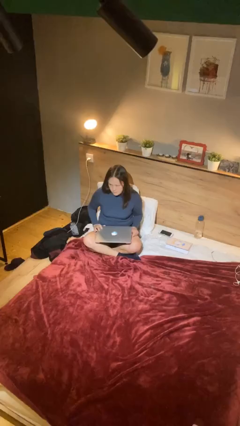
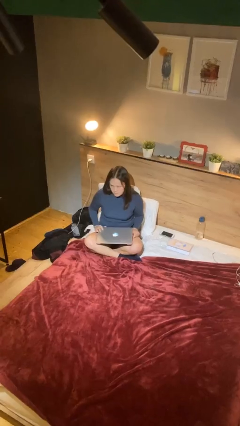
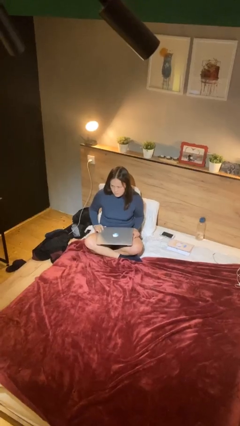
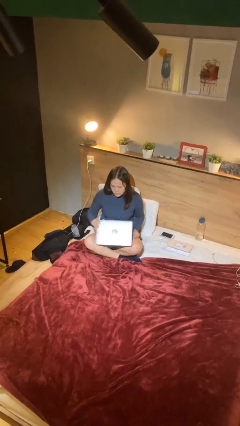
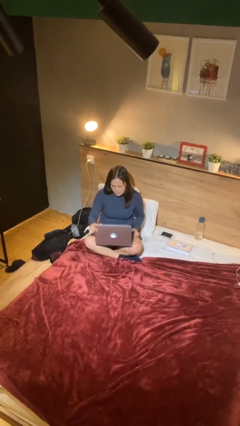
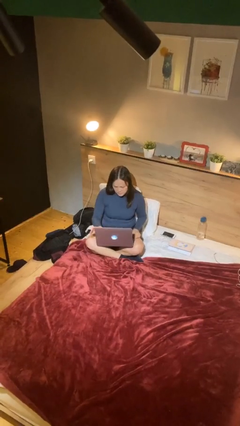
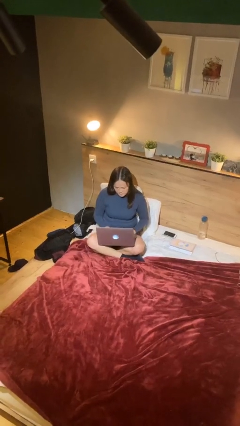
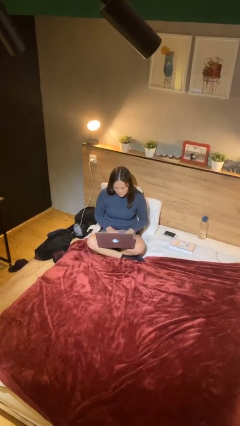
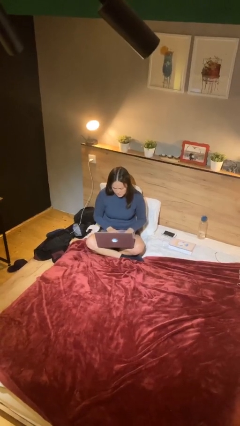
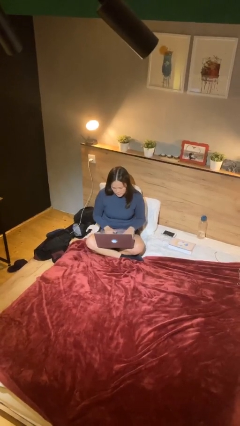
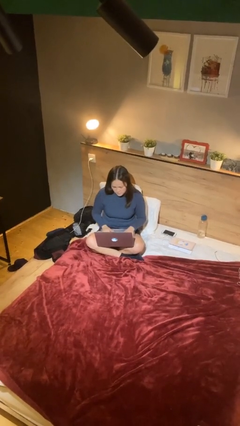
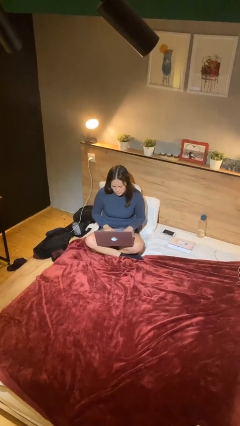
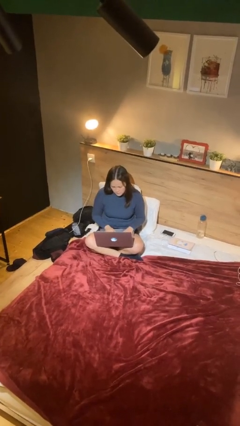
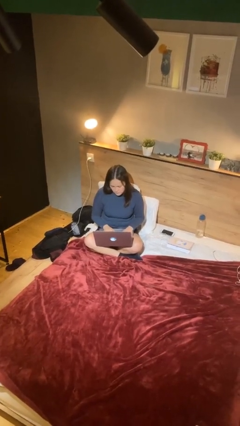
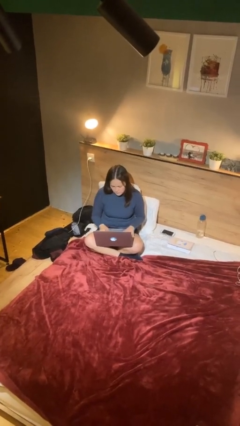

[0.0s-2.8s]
person interacts with laptop

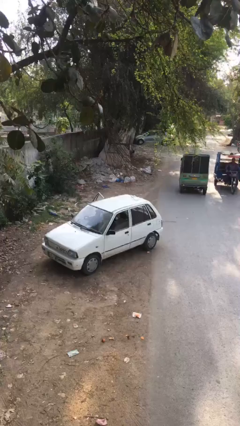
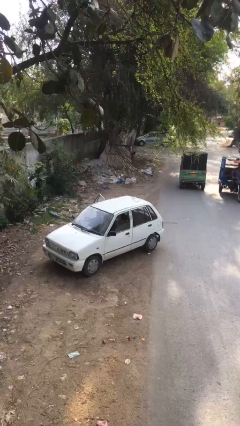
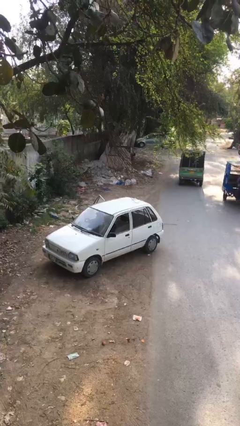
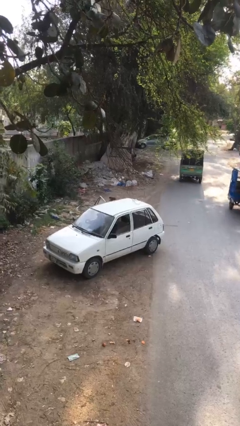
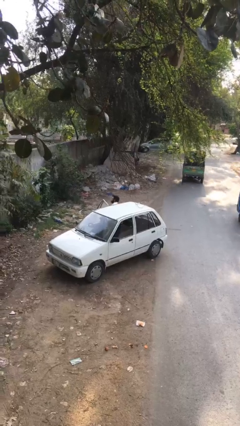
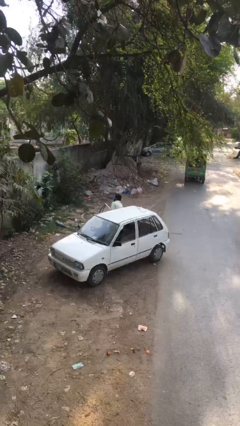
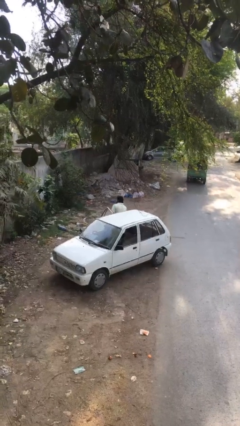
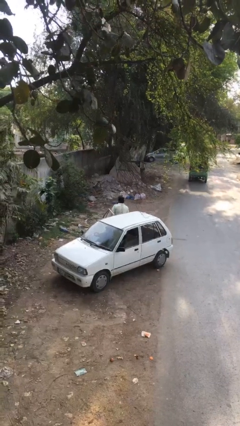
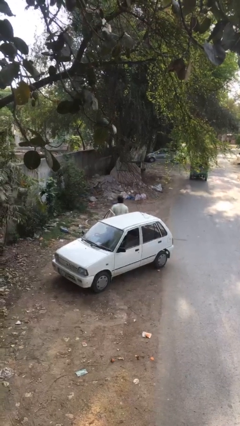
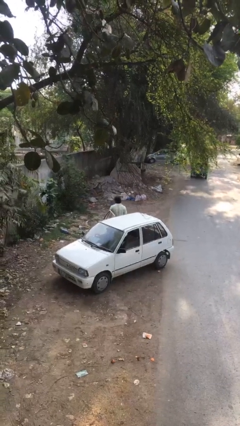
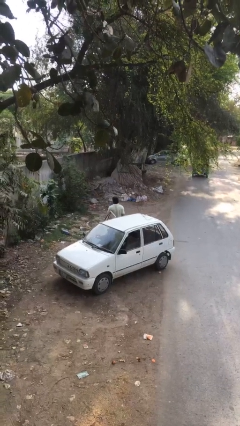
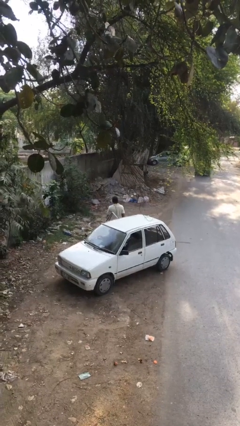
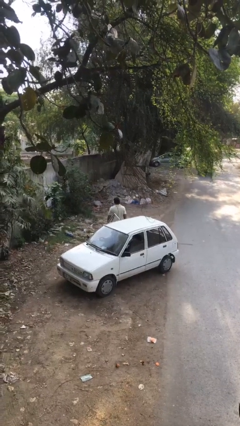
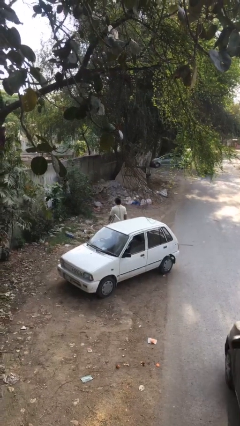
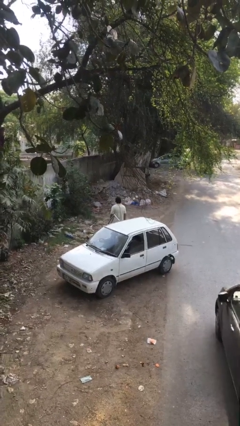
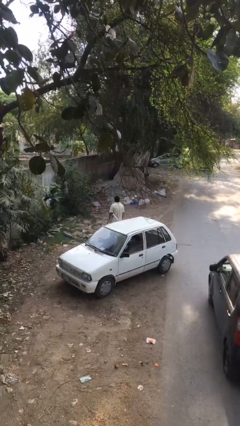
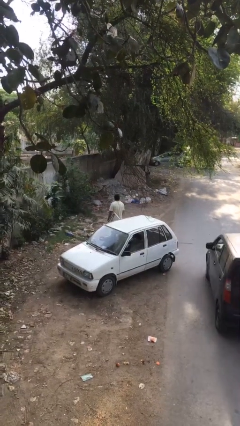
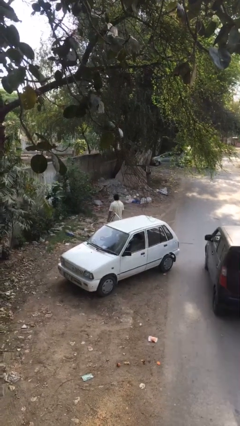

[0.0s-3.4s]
person exits car

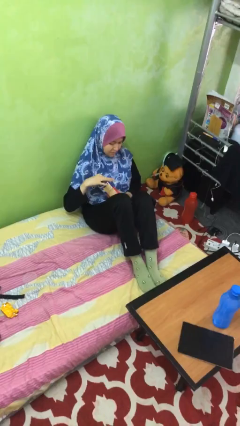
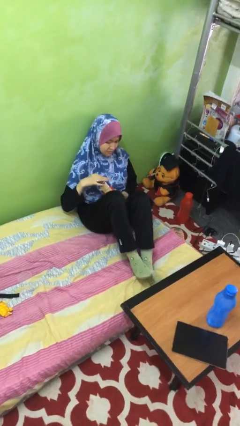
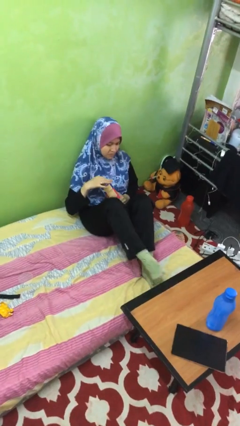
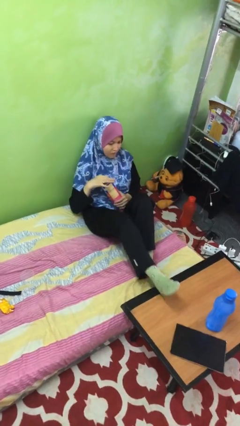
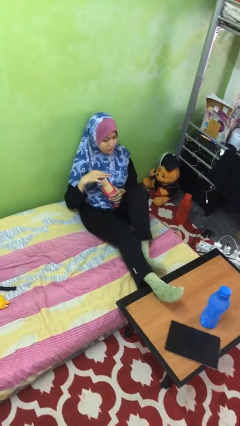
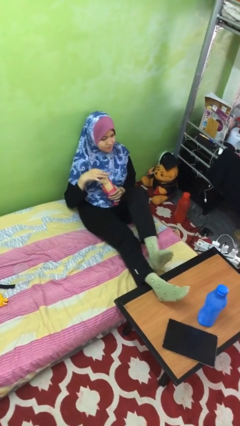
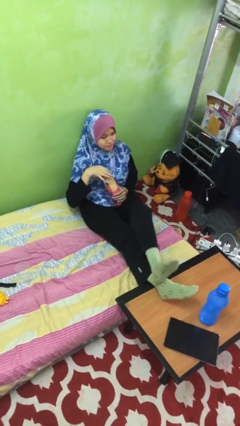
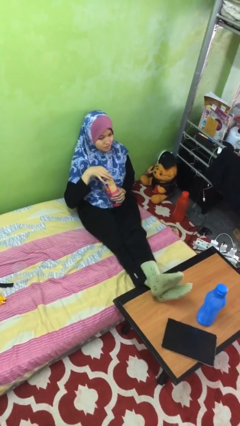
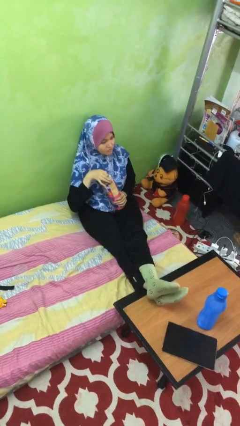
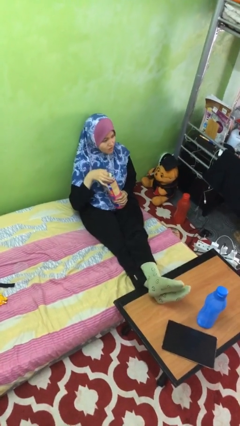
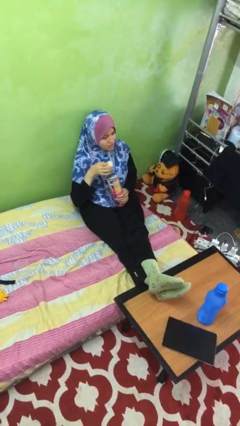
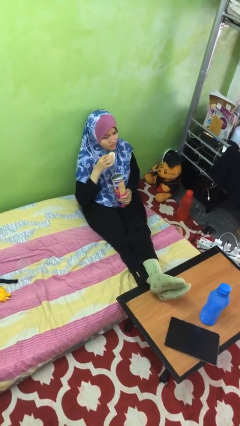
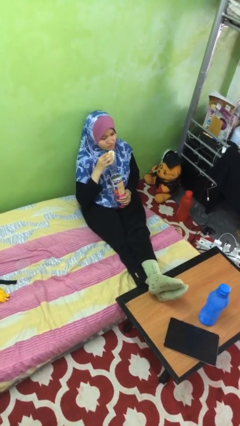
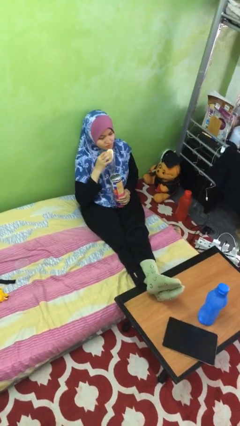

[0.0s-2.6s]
person puts feet up

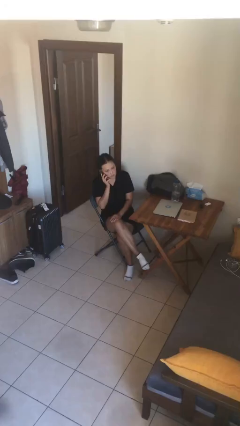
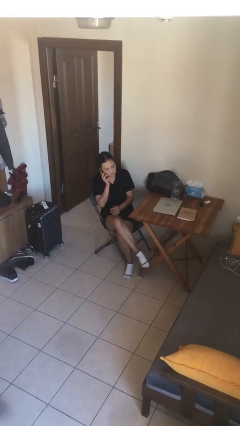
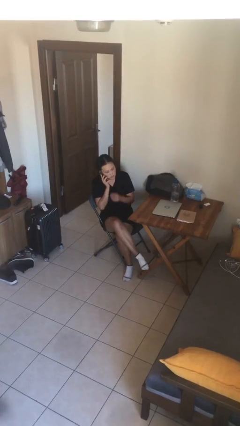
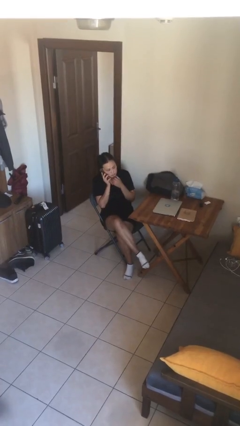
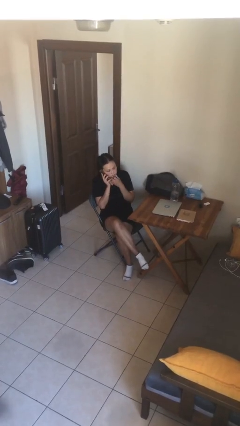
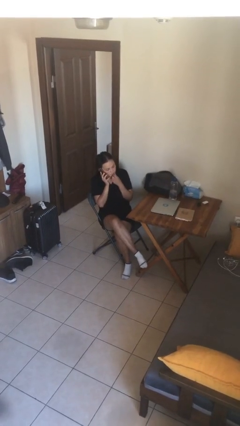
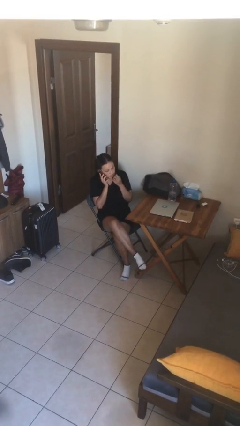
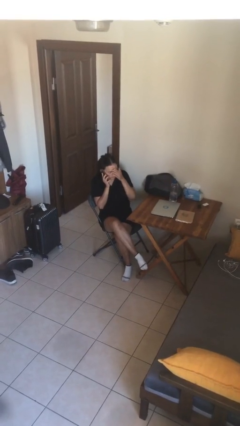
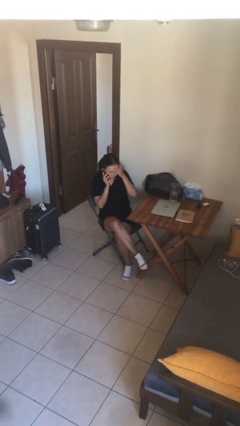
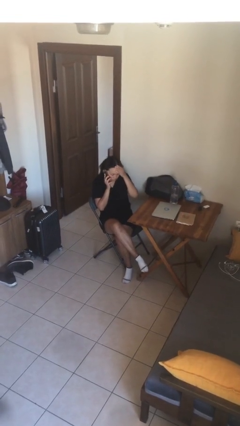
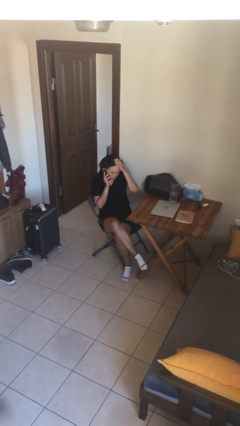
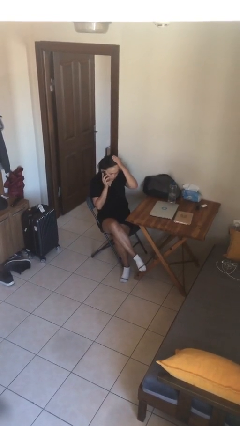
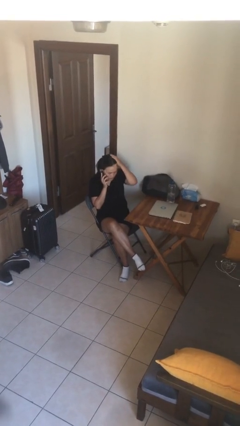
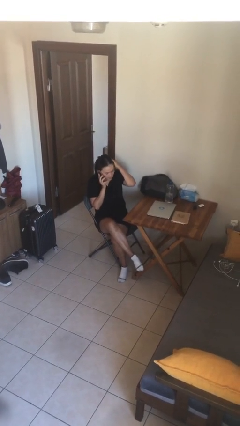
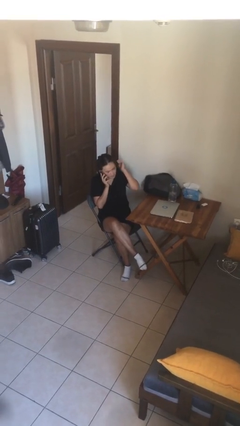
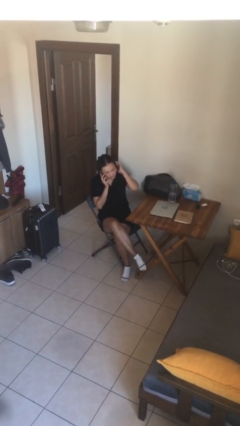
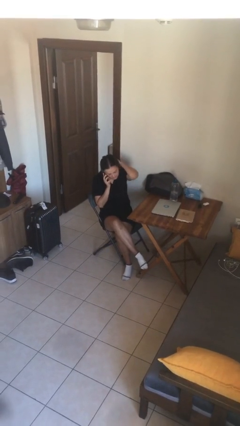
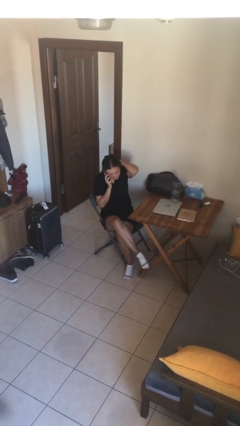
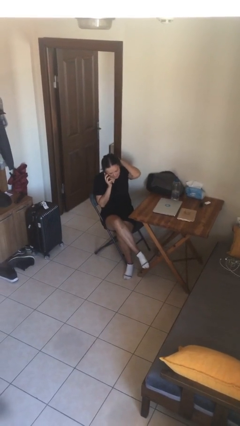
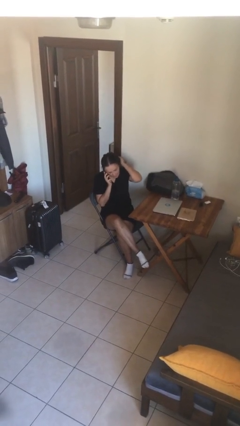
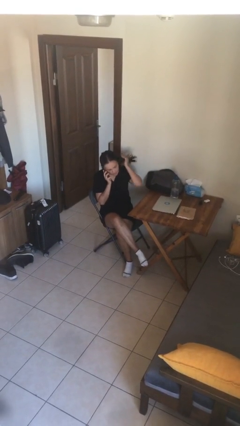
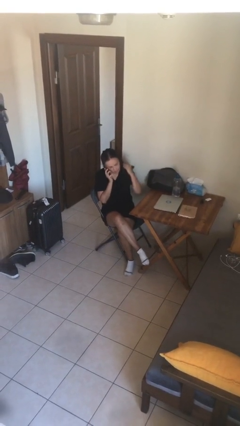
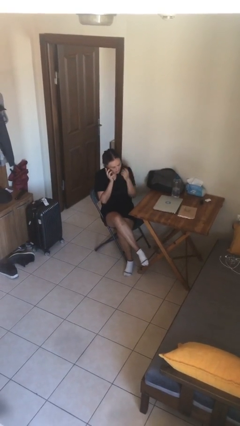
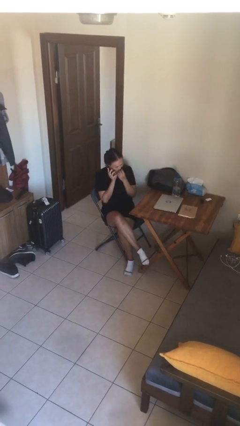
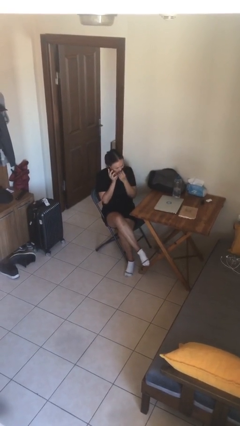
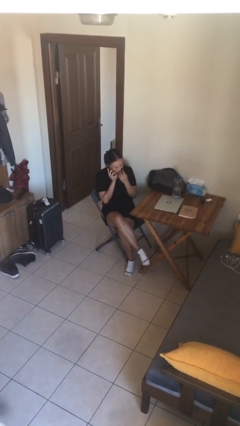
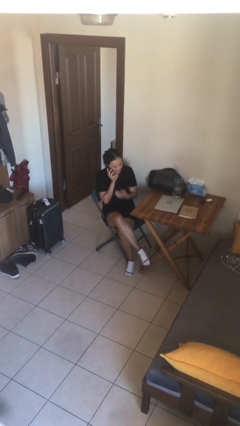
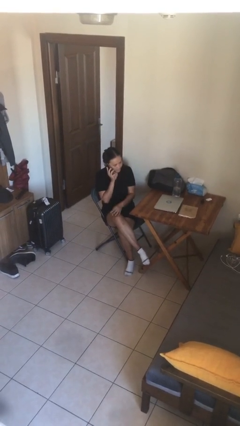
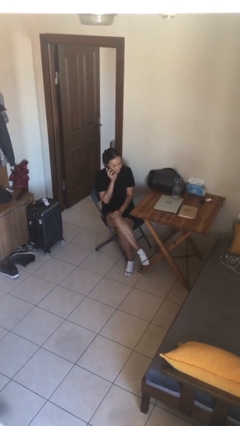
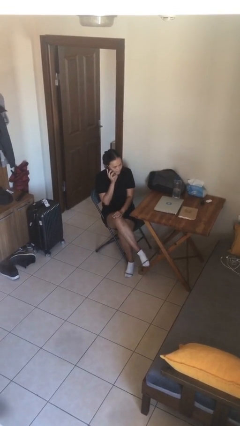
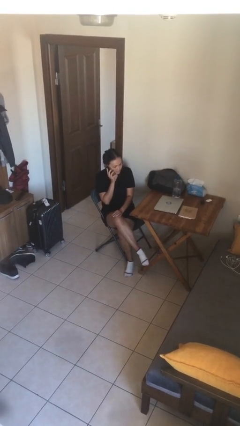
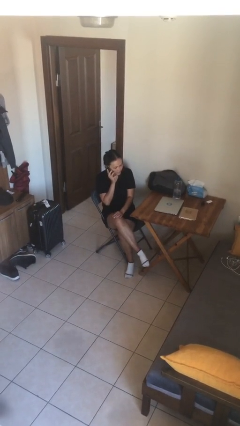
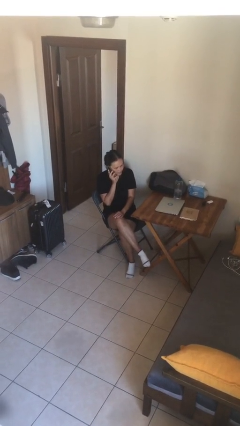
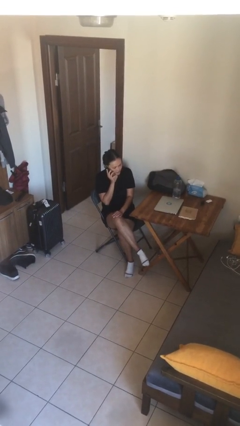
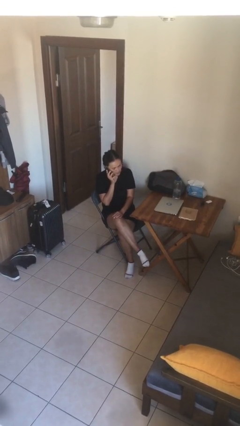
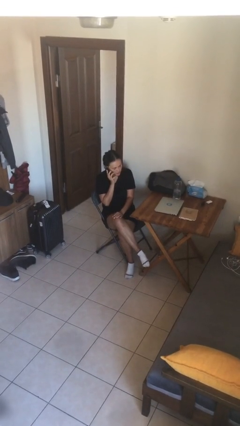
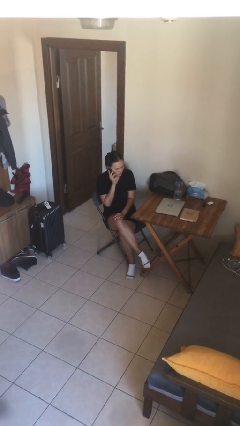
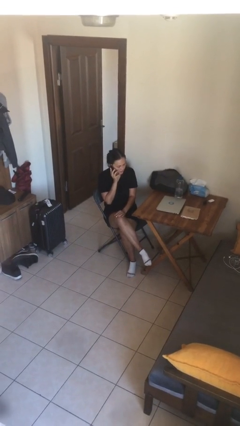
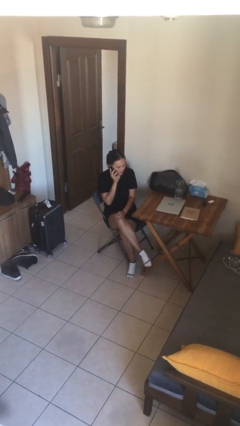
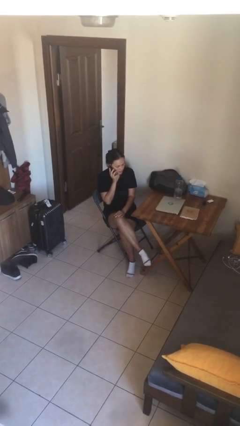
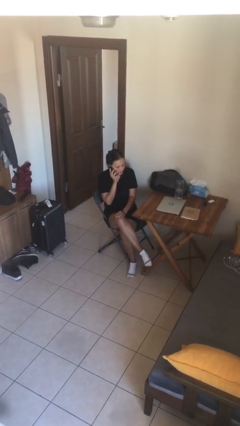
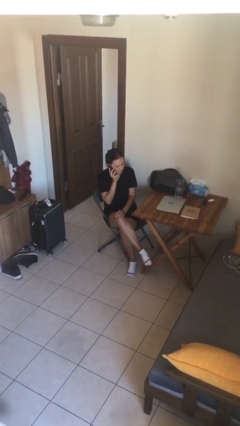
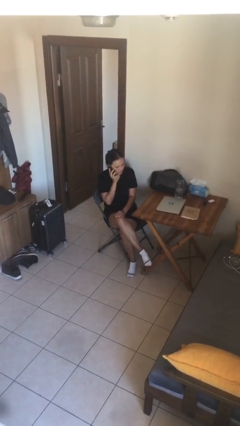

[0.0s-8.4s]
person talks on phone
